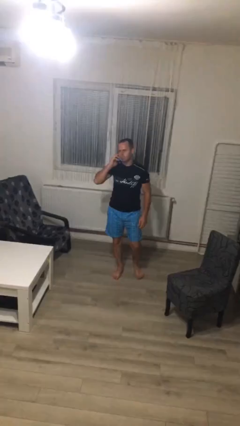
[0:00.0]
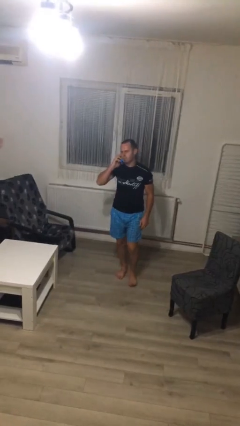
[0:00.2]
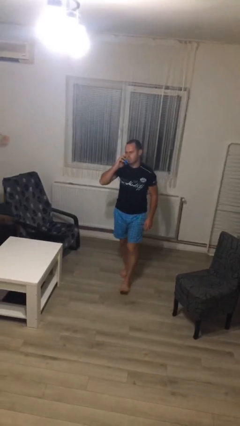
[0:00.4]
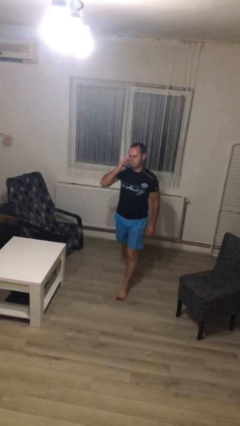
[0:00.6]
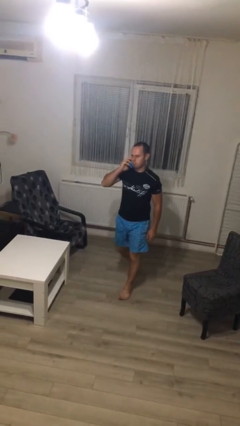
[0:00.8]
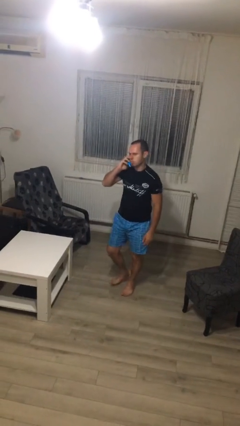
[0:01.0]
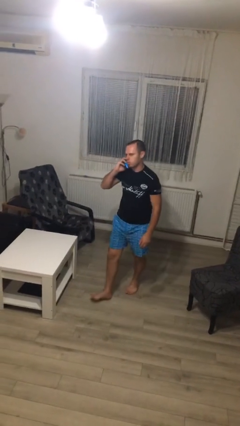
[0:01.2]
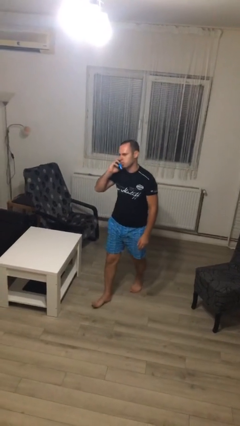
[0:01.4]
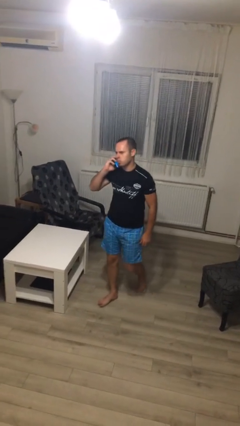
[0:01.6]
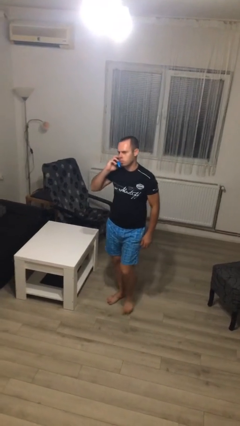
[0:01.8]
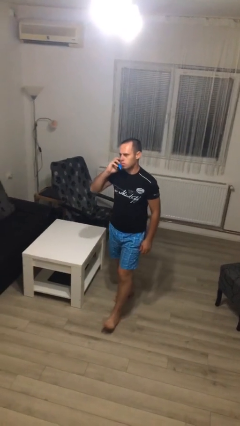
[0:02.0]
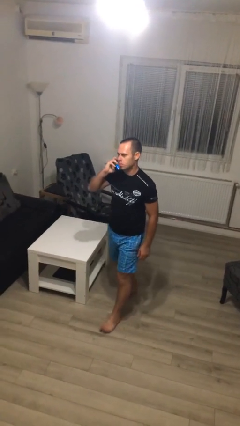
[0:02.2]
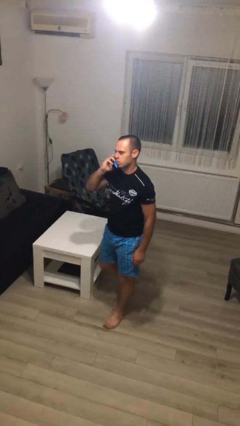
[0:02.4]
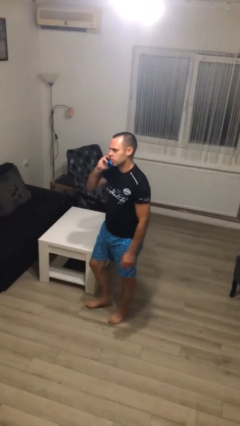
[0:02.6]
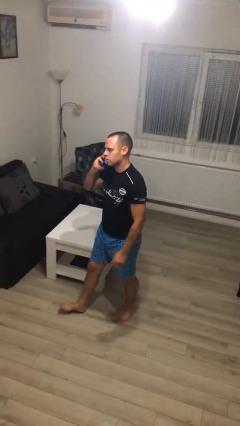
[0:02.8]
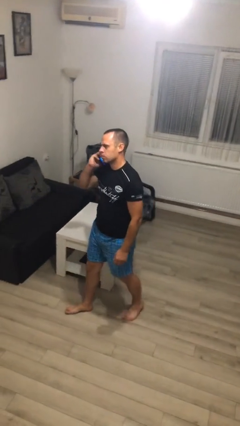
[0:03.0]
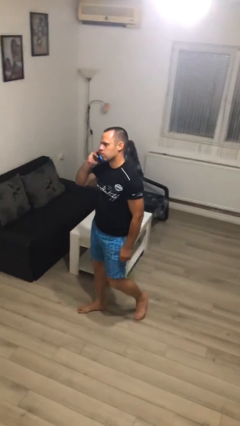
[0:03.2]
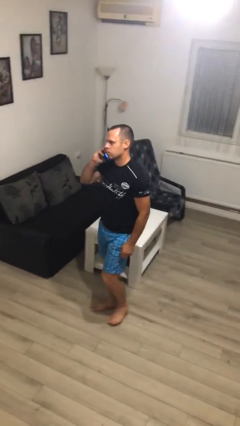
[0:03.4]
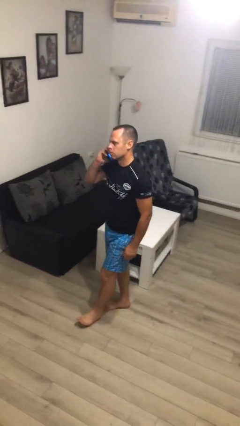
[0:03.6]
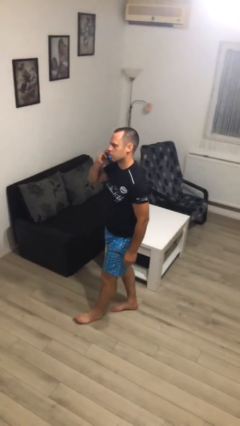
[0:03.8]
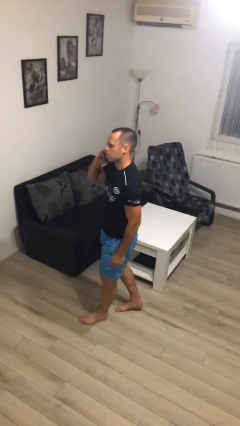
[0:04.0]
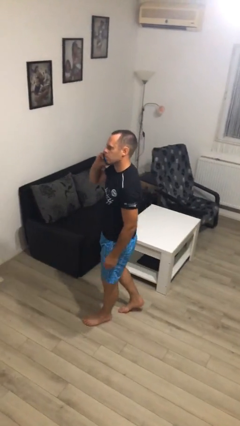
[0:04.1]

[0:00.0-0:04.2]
person talks on phone

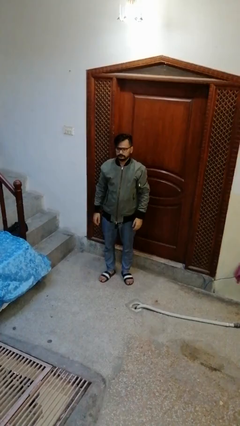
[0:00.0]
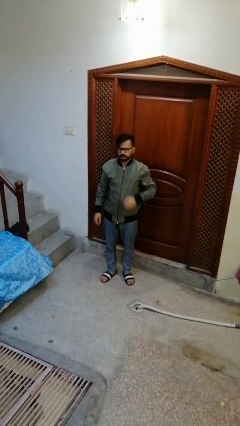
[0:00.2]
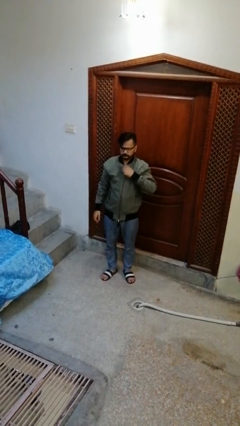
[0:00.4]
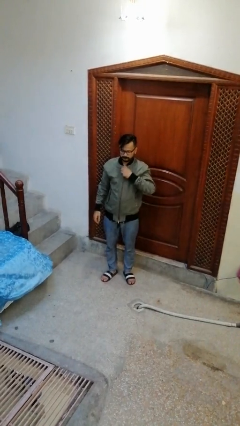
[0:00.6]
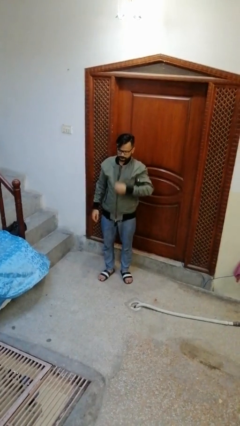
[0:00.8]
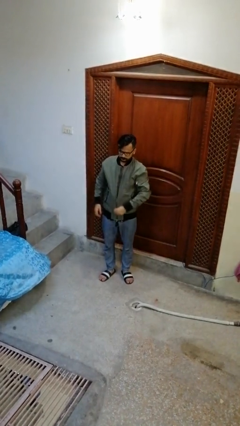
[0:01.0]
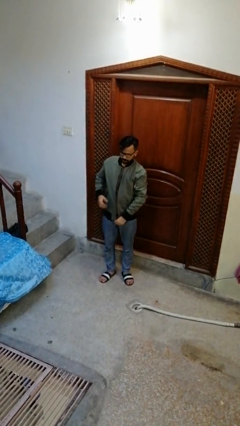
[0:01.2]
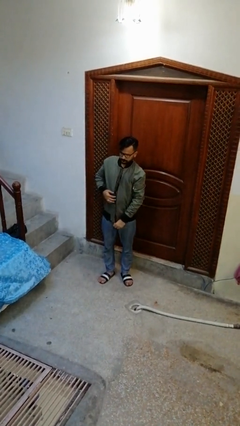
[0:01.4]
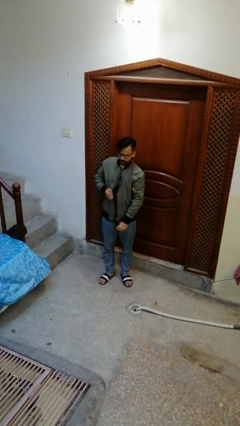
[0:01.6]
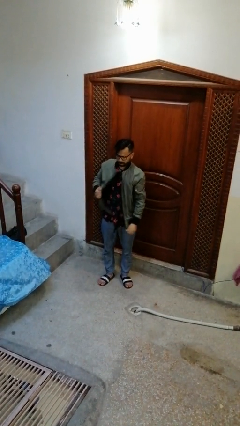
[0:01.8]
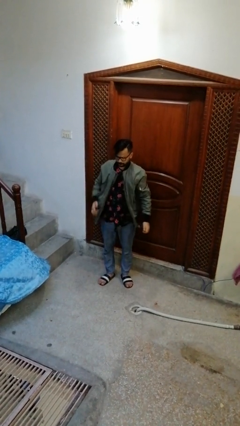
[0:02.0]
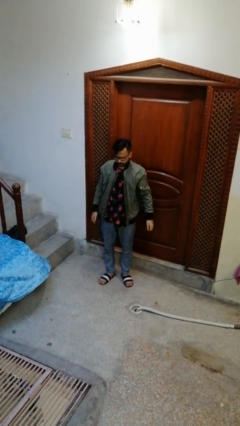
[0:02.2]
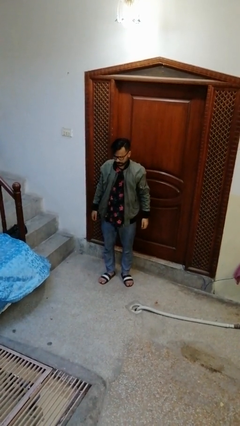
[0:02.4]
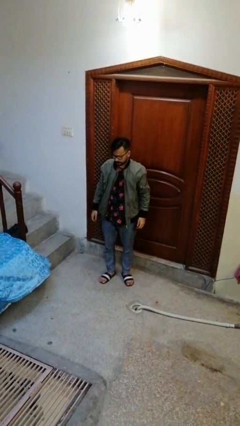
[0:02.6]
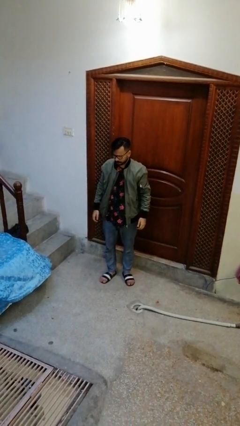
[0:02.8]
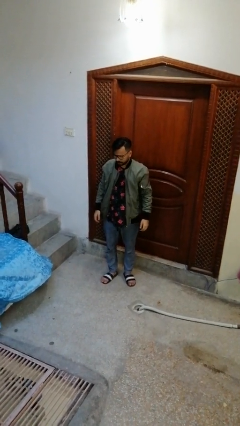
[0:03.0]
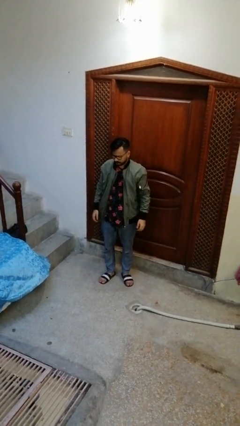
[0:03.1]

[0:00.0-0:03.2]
person unzips jacket

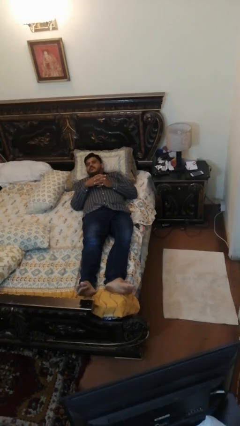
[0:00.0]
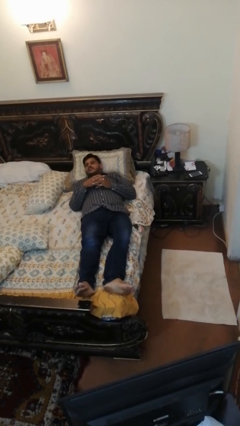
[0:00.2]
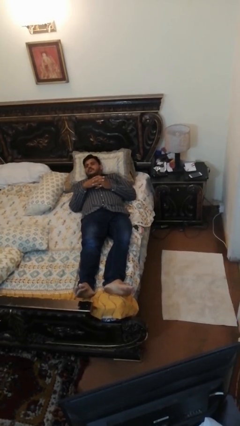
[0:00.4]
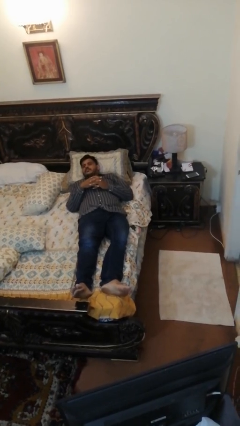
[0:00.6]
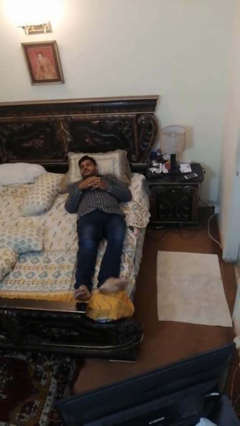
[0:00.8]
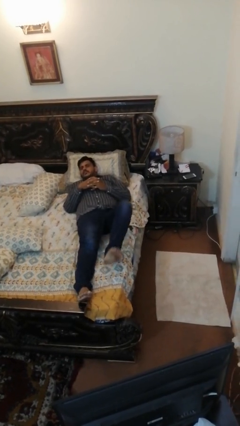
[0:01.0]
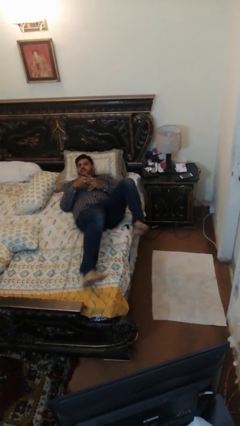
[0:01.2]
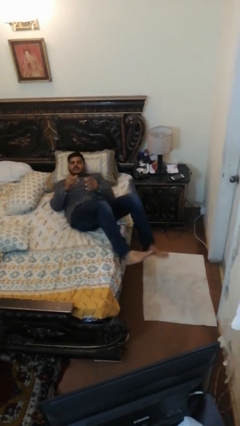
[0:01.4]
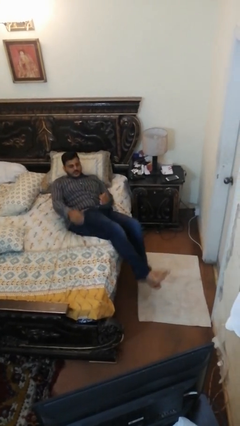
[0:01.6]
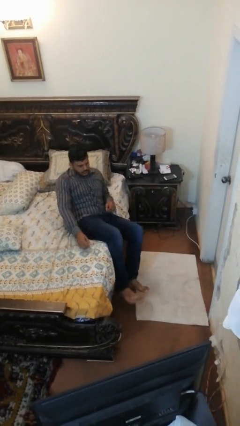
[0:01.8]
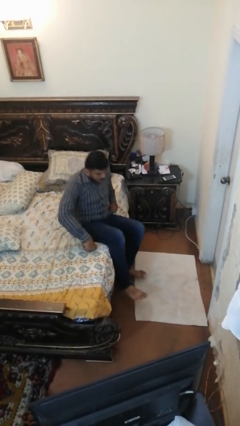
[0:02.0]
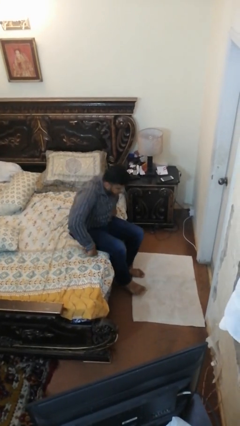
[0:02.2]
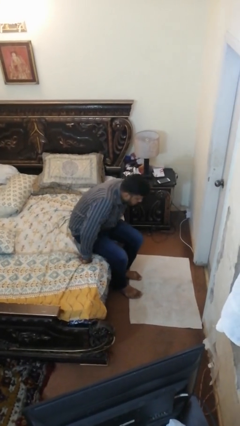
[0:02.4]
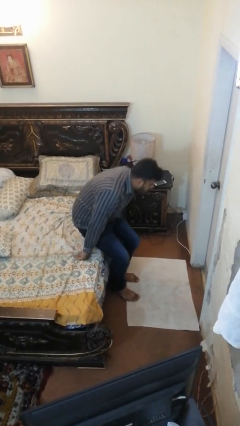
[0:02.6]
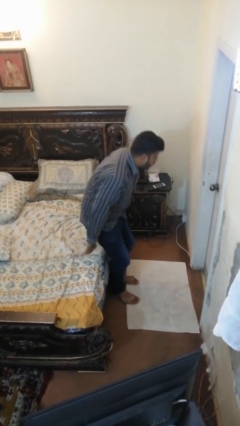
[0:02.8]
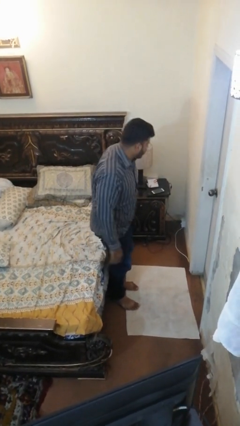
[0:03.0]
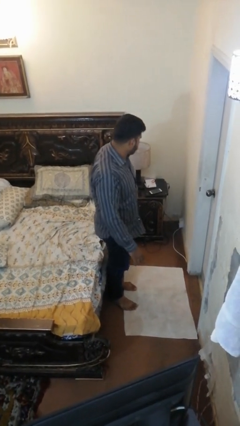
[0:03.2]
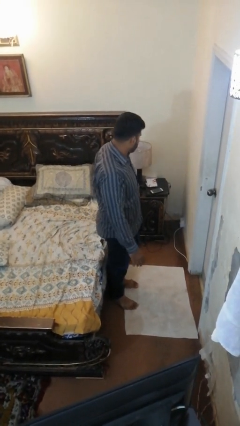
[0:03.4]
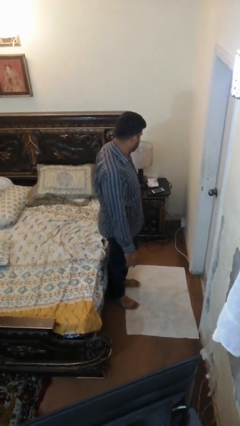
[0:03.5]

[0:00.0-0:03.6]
person stands up

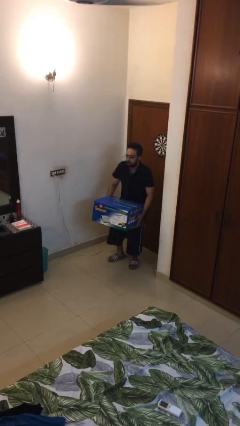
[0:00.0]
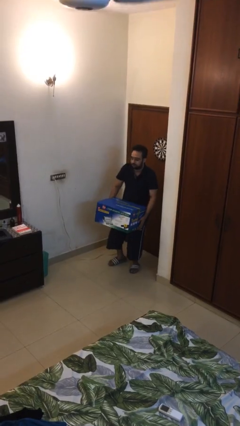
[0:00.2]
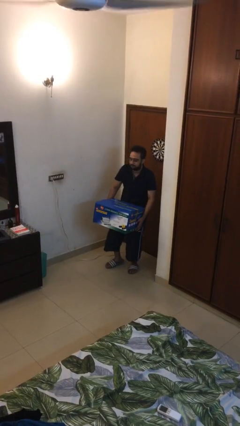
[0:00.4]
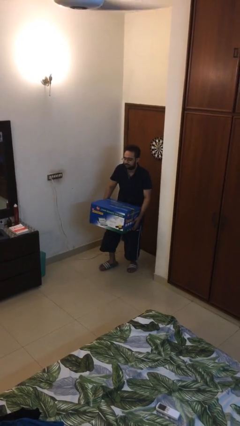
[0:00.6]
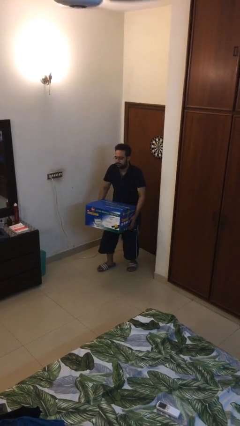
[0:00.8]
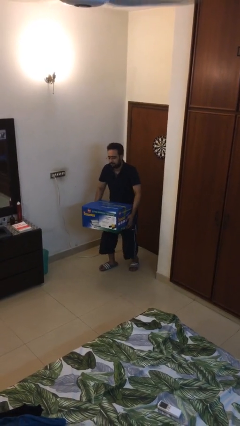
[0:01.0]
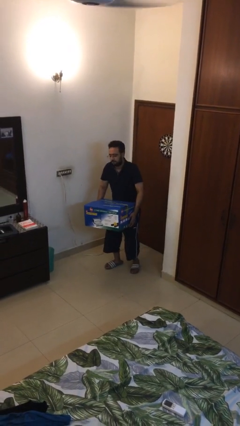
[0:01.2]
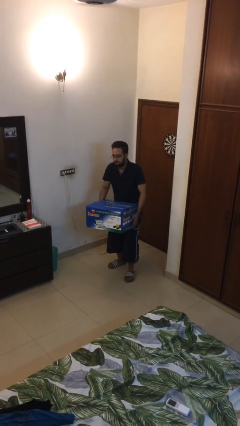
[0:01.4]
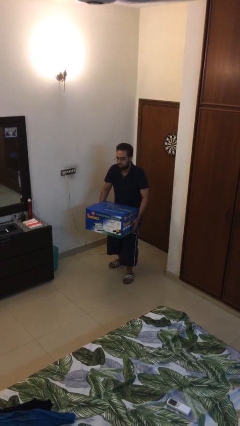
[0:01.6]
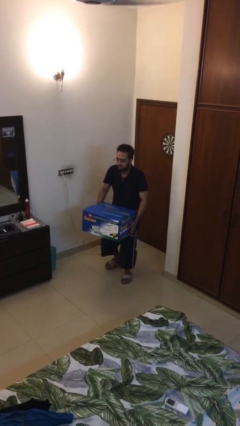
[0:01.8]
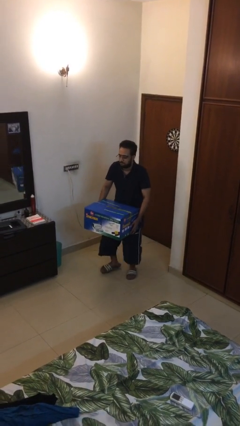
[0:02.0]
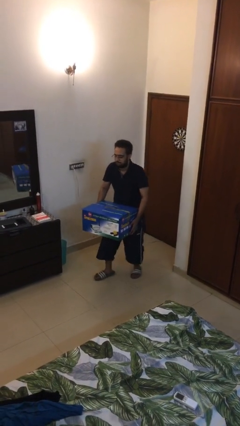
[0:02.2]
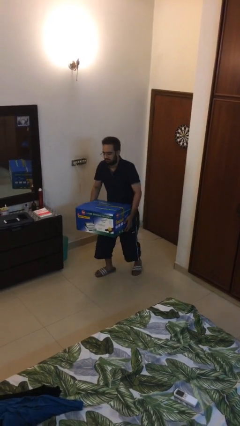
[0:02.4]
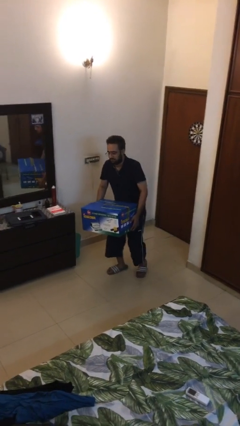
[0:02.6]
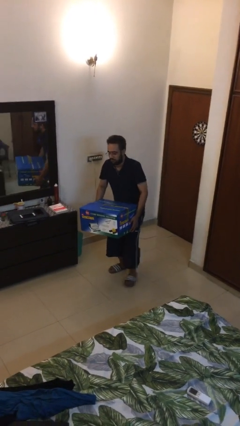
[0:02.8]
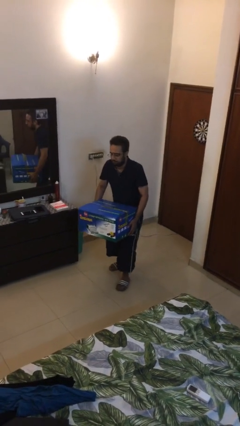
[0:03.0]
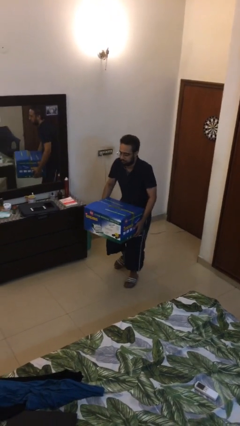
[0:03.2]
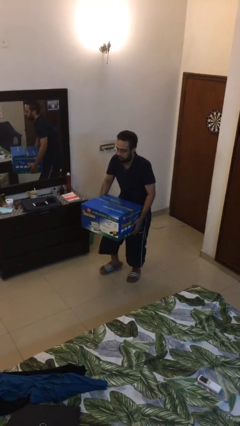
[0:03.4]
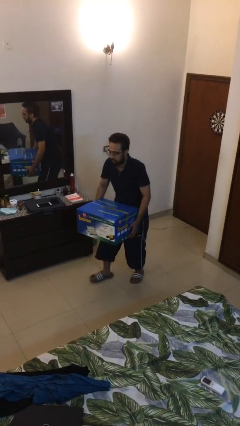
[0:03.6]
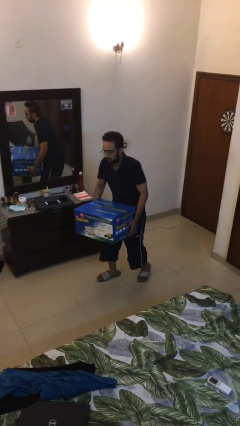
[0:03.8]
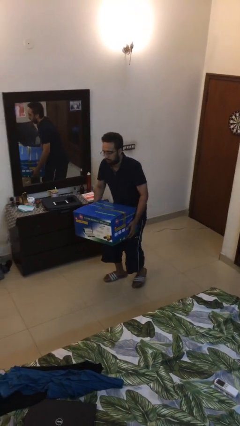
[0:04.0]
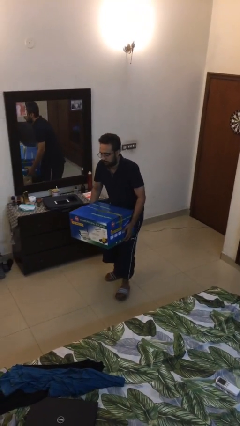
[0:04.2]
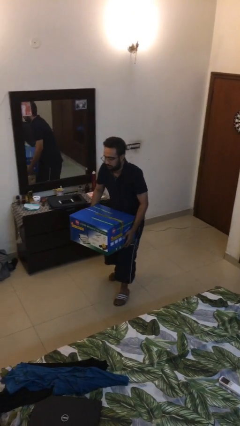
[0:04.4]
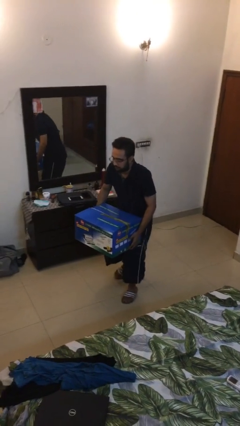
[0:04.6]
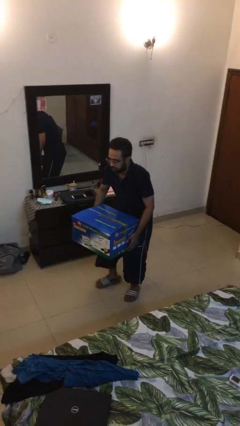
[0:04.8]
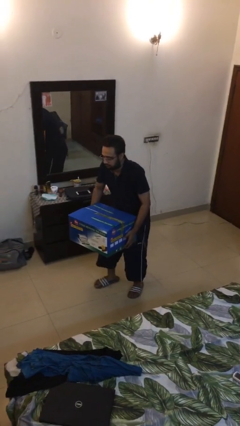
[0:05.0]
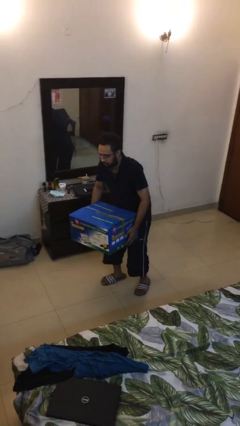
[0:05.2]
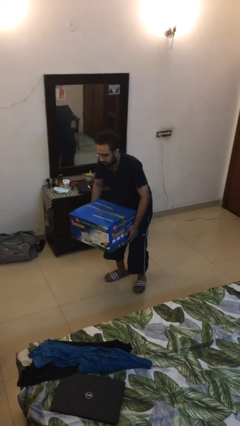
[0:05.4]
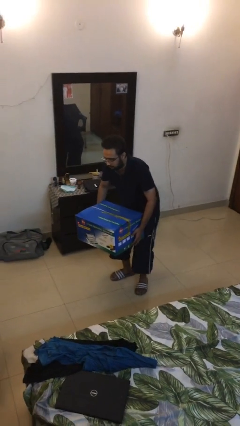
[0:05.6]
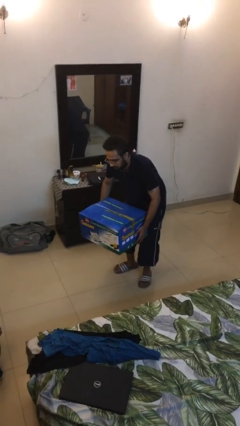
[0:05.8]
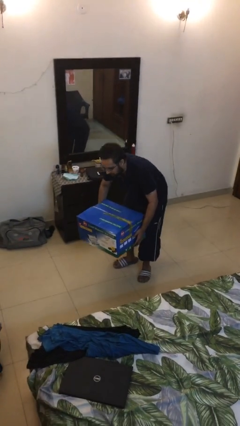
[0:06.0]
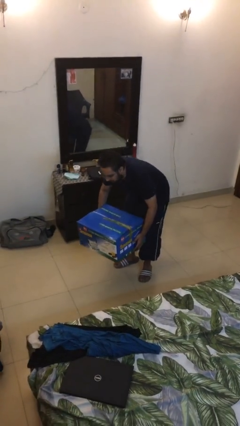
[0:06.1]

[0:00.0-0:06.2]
person carries heavy object

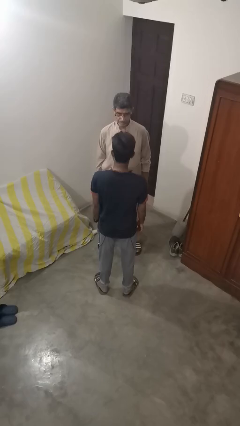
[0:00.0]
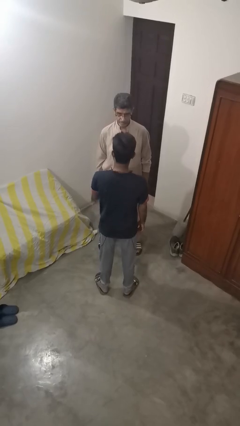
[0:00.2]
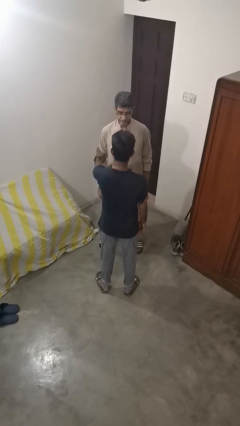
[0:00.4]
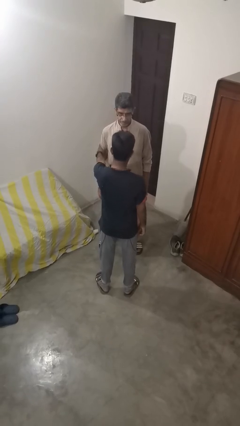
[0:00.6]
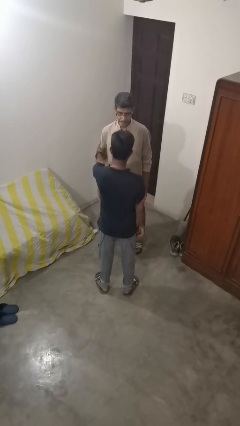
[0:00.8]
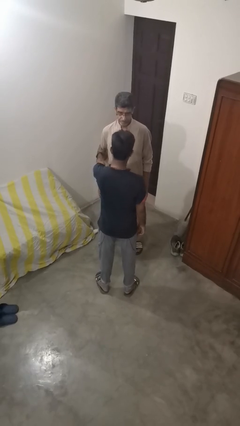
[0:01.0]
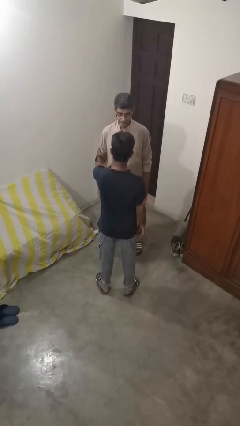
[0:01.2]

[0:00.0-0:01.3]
person grabs person by bicep
